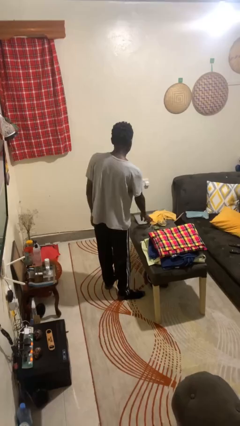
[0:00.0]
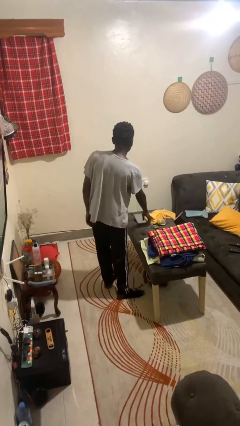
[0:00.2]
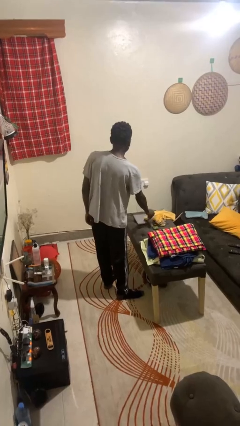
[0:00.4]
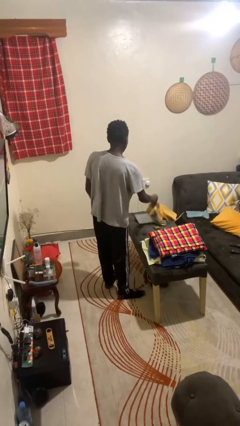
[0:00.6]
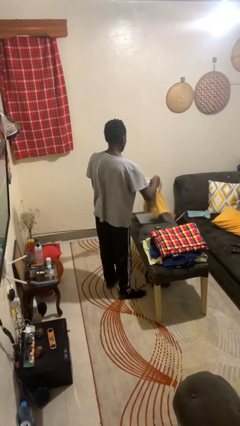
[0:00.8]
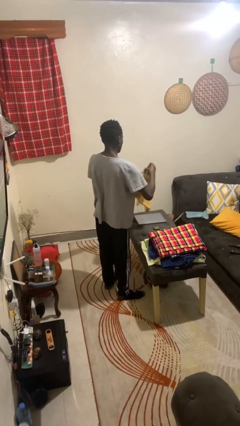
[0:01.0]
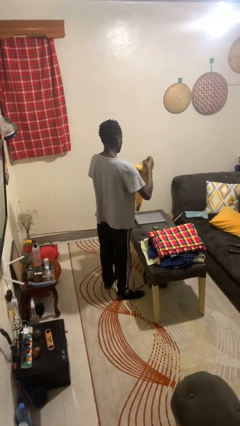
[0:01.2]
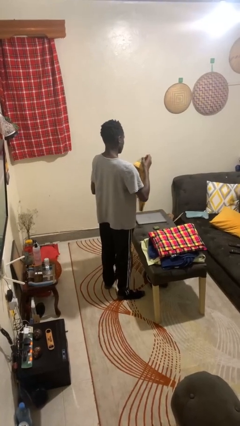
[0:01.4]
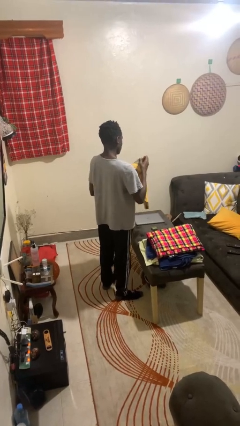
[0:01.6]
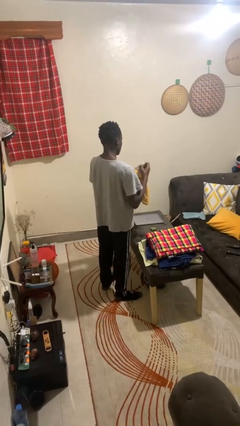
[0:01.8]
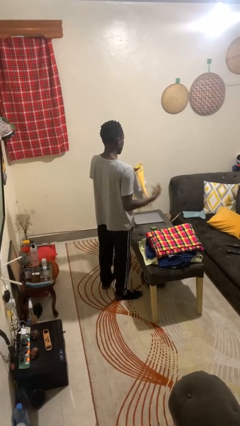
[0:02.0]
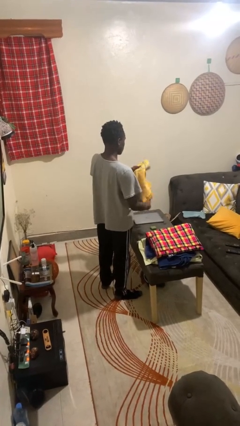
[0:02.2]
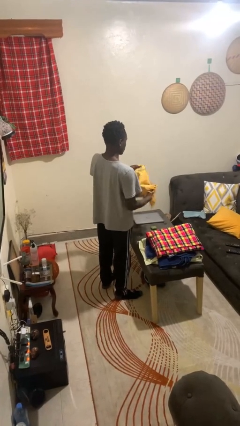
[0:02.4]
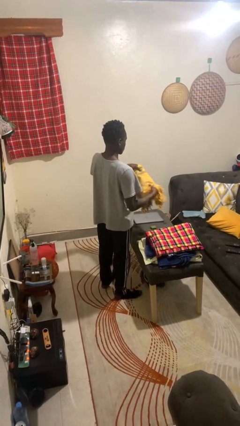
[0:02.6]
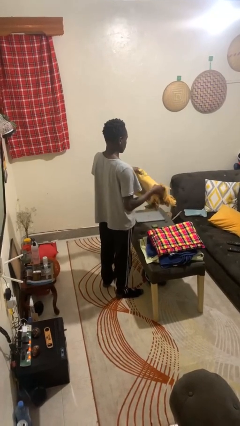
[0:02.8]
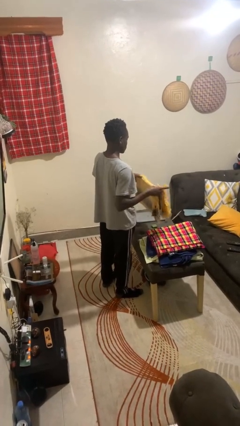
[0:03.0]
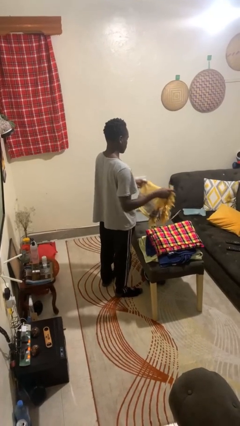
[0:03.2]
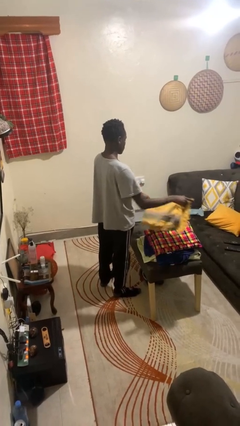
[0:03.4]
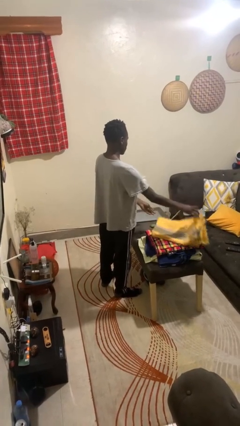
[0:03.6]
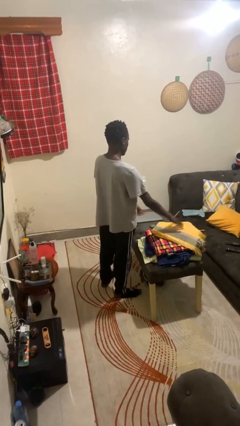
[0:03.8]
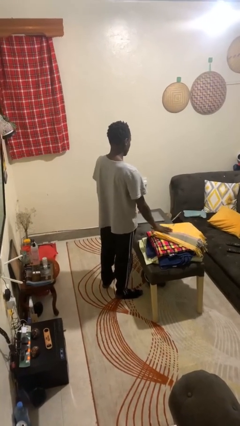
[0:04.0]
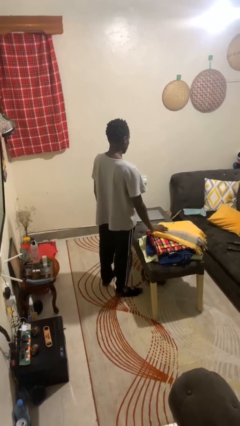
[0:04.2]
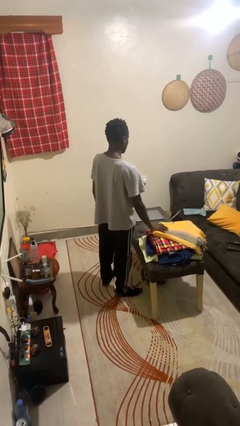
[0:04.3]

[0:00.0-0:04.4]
person folds towel

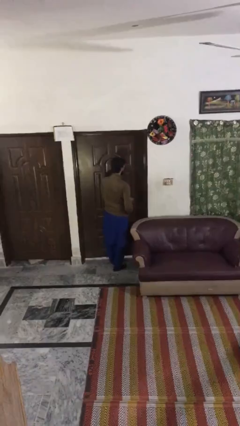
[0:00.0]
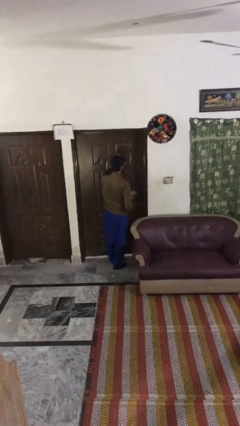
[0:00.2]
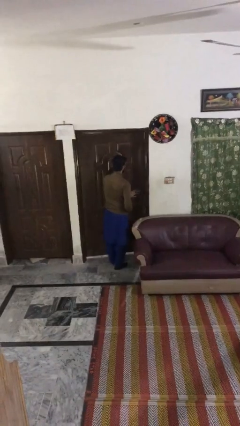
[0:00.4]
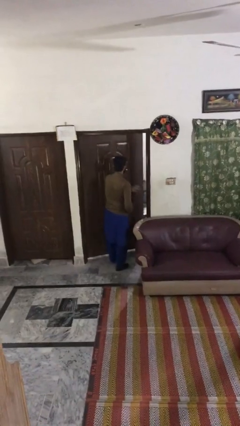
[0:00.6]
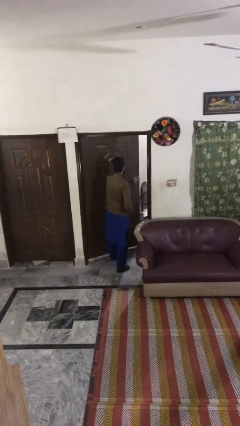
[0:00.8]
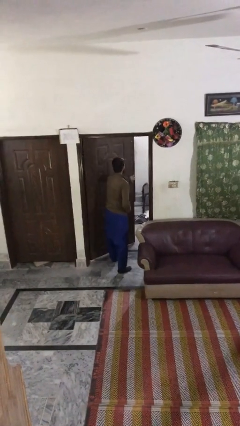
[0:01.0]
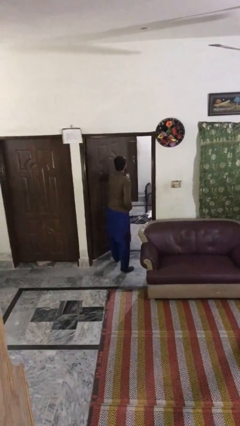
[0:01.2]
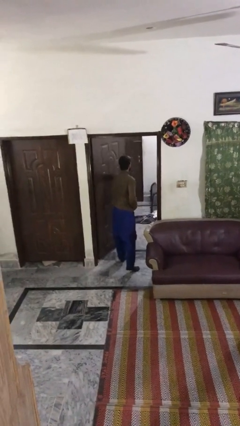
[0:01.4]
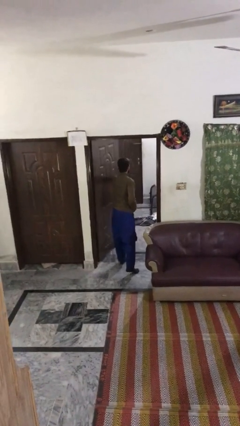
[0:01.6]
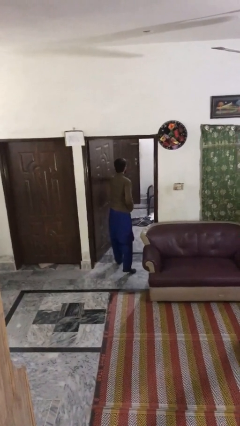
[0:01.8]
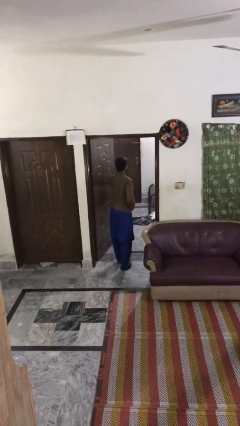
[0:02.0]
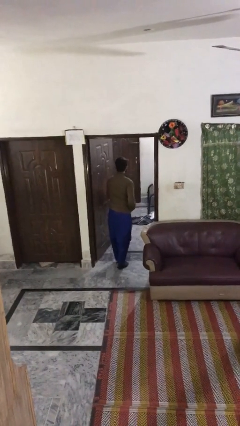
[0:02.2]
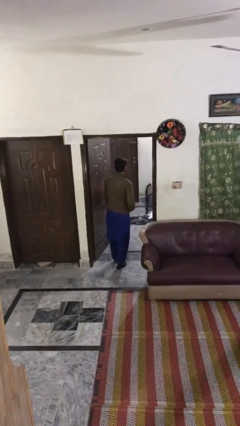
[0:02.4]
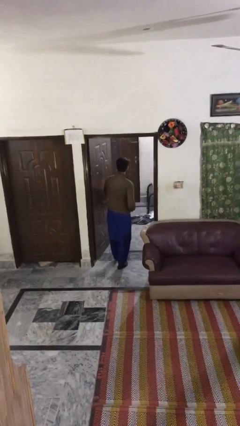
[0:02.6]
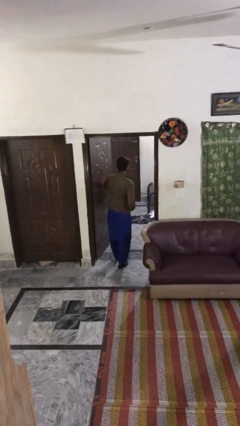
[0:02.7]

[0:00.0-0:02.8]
person opens facility door

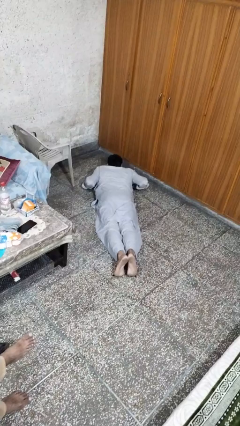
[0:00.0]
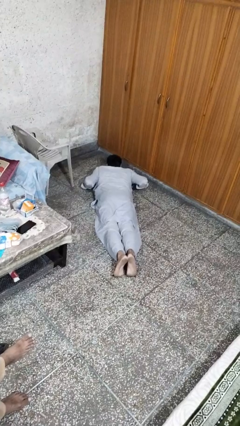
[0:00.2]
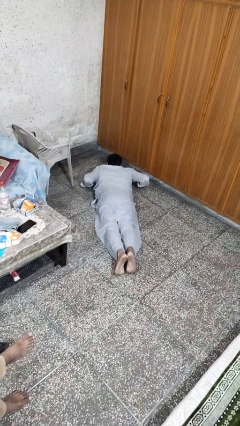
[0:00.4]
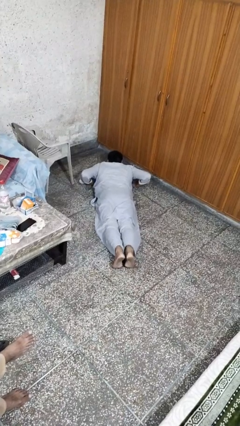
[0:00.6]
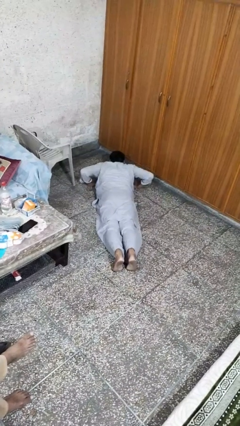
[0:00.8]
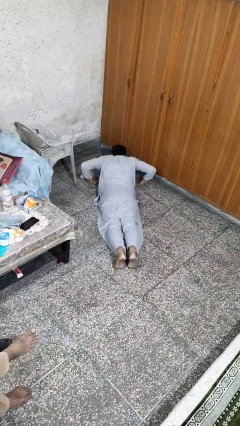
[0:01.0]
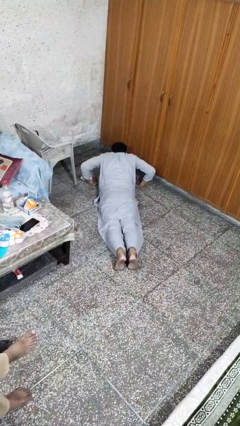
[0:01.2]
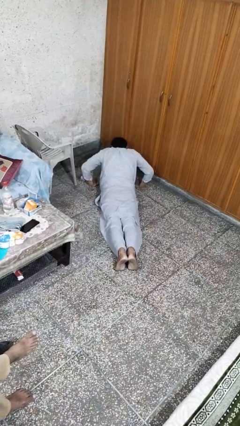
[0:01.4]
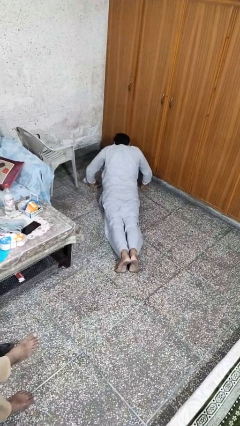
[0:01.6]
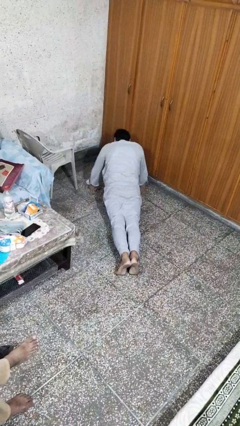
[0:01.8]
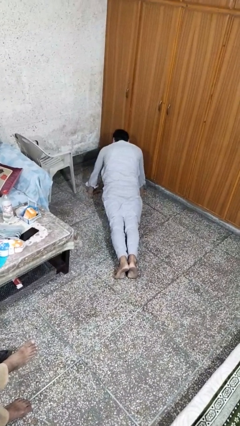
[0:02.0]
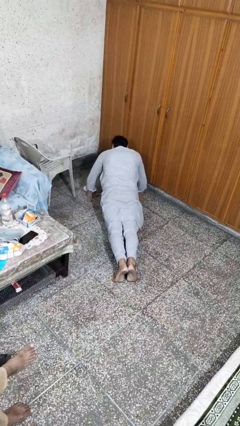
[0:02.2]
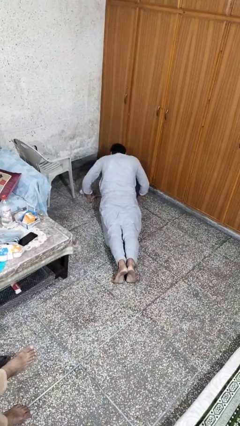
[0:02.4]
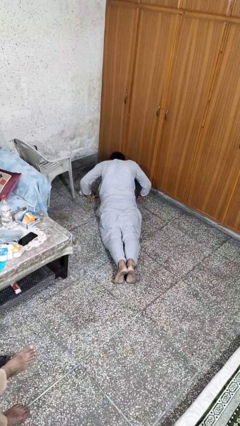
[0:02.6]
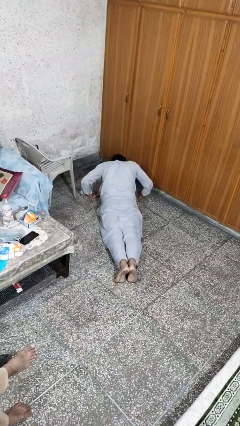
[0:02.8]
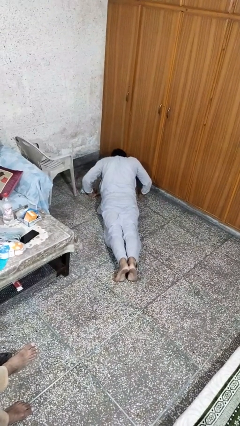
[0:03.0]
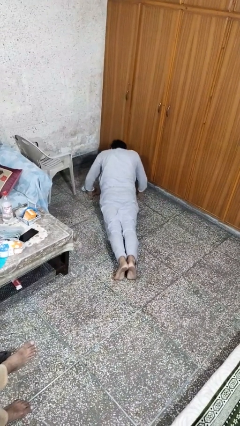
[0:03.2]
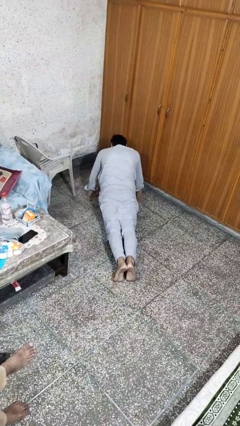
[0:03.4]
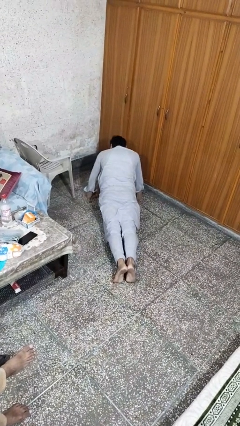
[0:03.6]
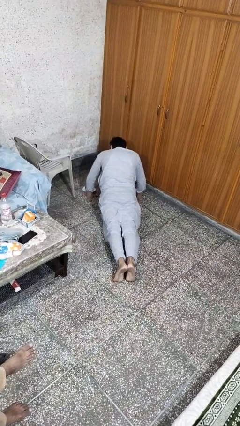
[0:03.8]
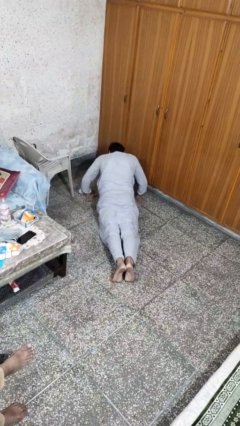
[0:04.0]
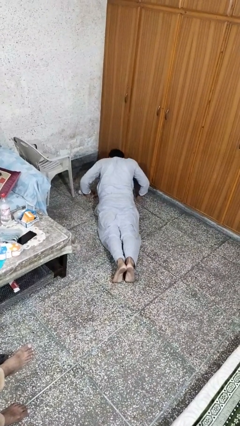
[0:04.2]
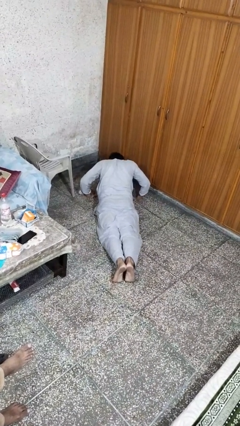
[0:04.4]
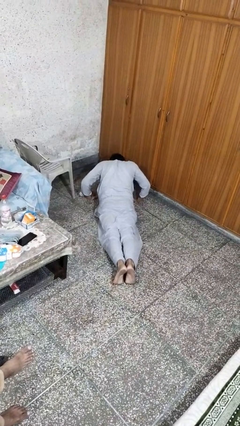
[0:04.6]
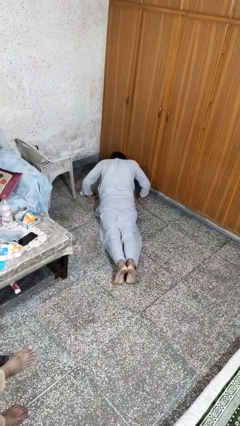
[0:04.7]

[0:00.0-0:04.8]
person exercises with pushup

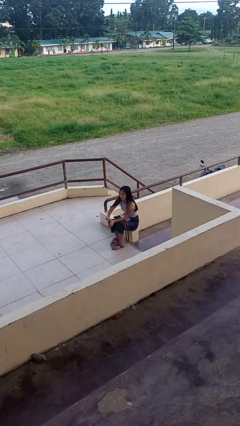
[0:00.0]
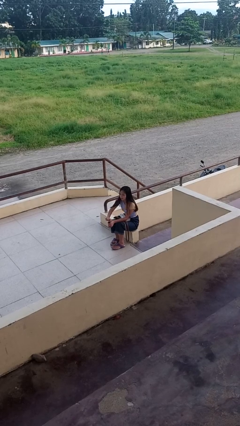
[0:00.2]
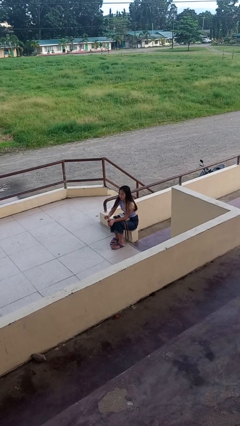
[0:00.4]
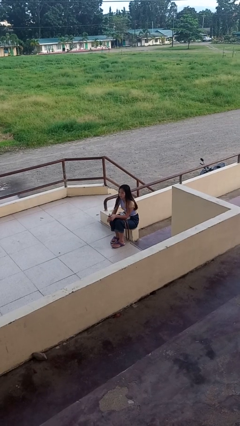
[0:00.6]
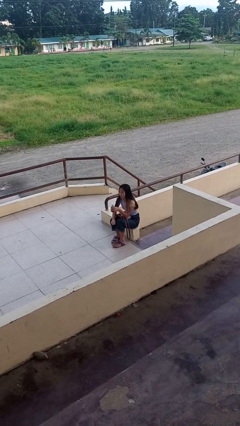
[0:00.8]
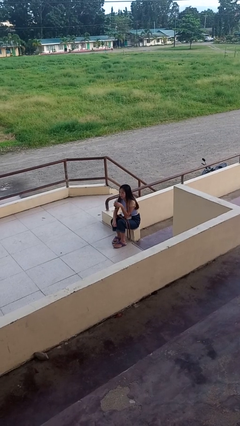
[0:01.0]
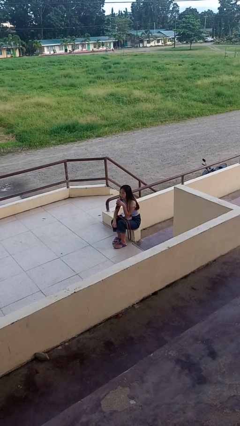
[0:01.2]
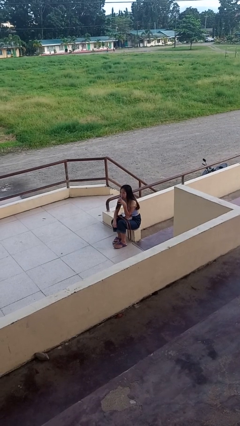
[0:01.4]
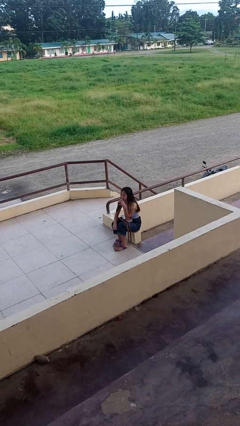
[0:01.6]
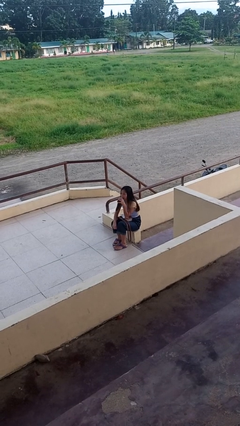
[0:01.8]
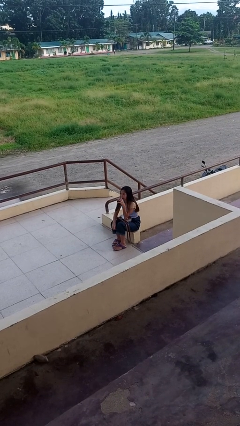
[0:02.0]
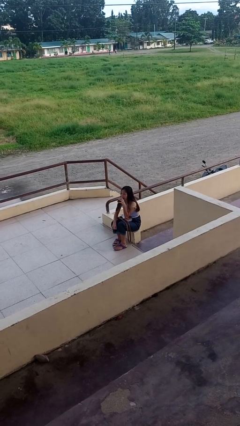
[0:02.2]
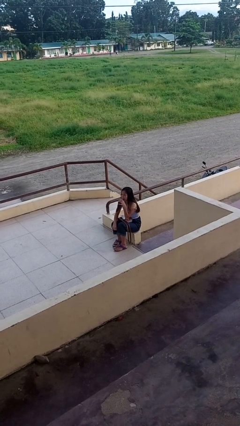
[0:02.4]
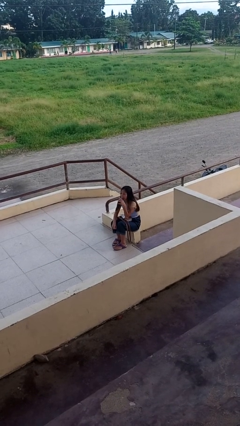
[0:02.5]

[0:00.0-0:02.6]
person drinks from beverage can

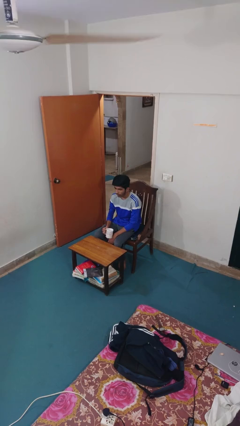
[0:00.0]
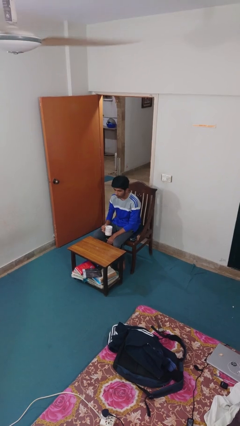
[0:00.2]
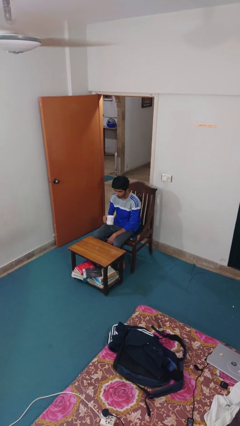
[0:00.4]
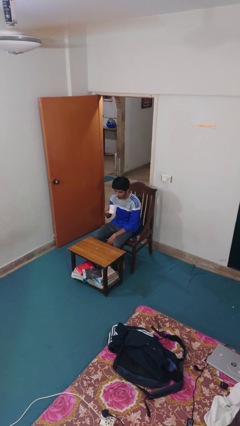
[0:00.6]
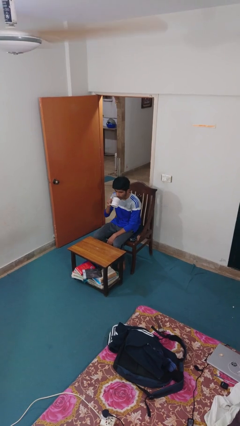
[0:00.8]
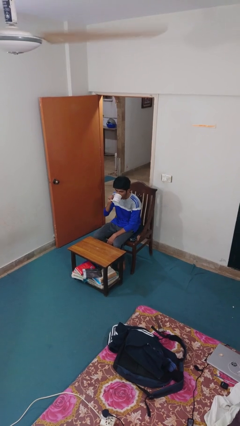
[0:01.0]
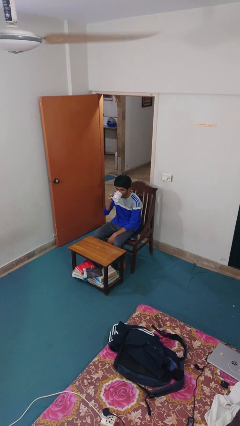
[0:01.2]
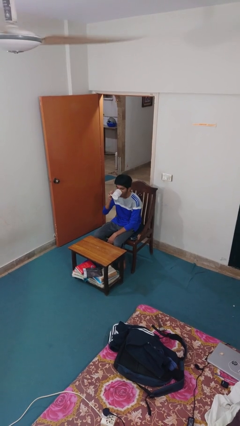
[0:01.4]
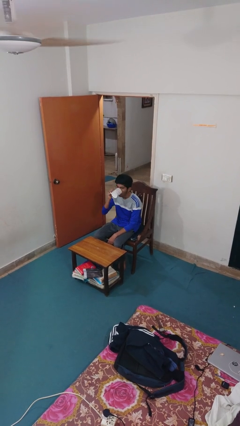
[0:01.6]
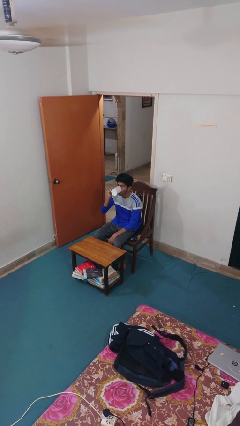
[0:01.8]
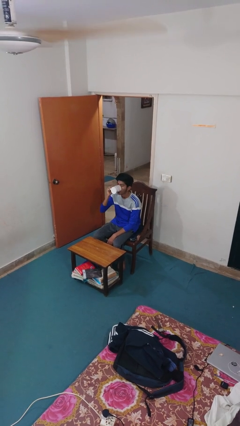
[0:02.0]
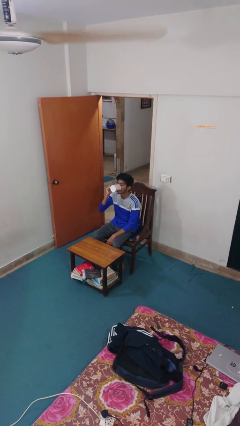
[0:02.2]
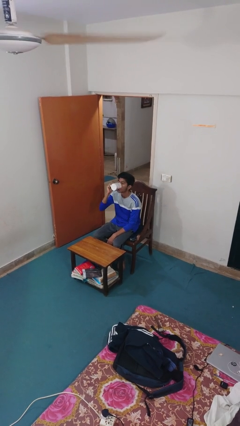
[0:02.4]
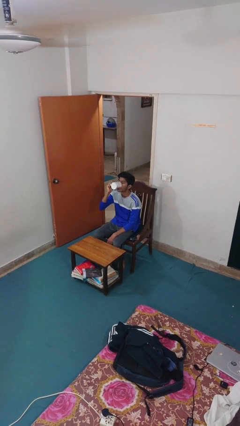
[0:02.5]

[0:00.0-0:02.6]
person drinks from mug

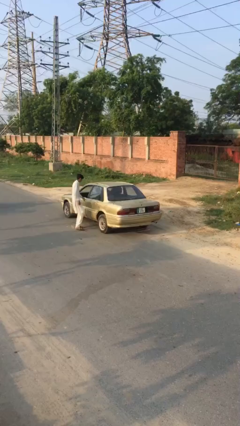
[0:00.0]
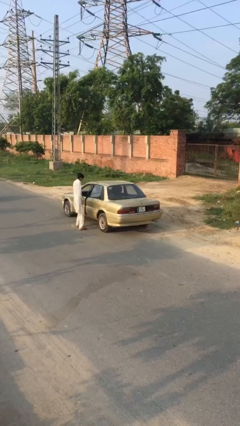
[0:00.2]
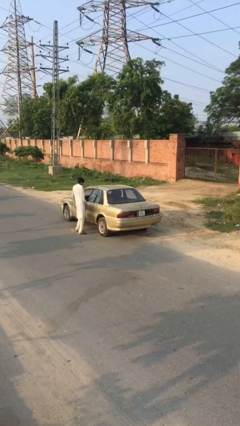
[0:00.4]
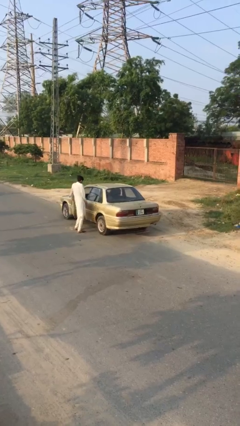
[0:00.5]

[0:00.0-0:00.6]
car picks up person
